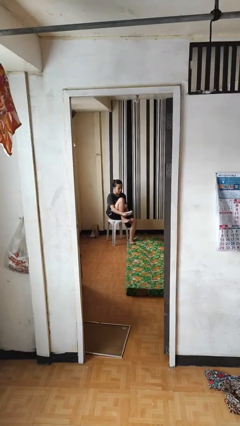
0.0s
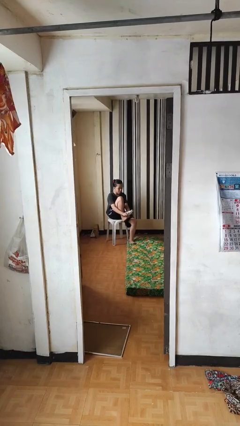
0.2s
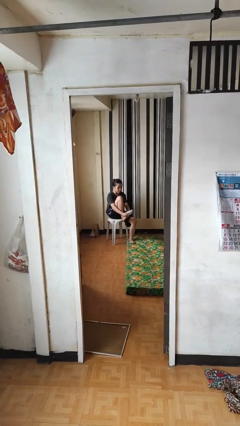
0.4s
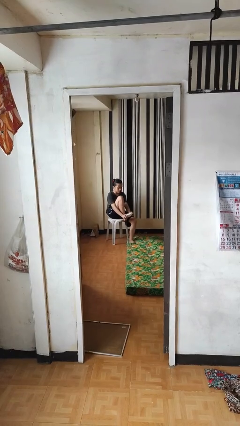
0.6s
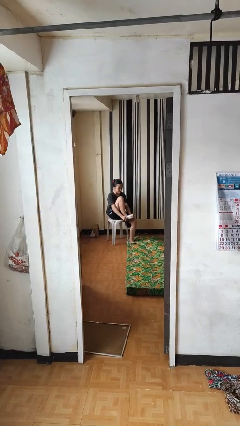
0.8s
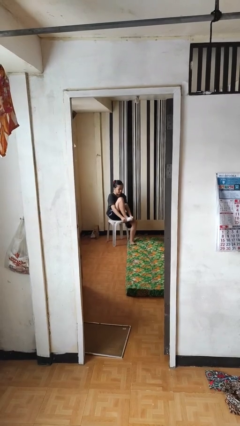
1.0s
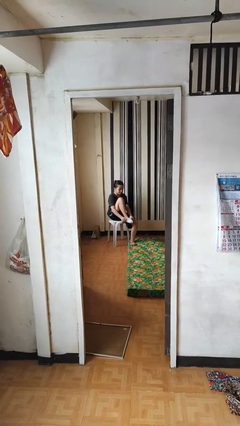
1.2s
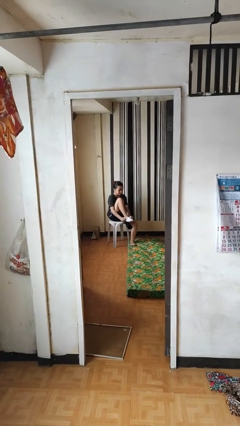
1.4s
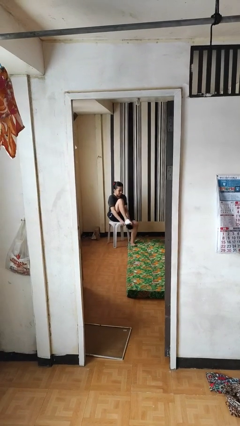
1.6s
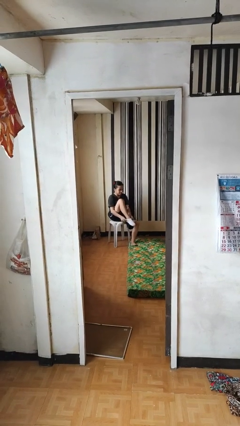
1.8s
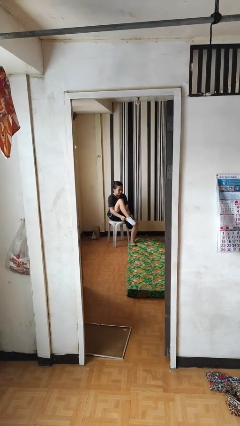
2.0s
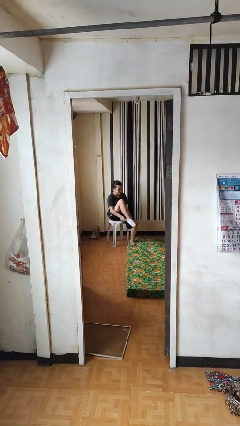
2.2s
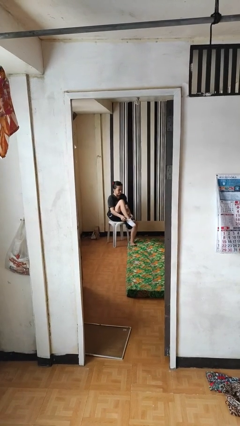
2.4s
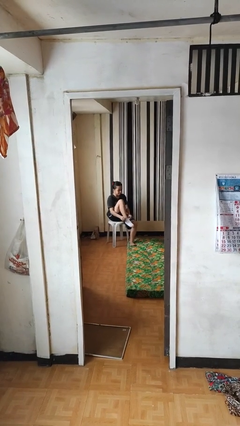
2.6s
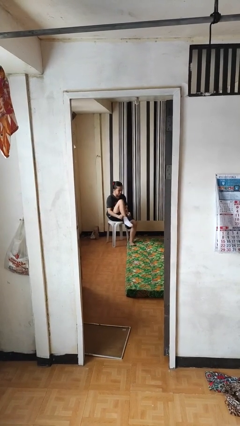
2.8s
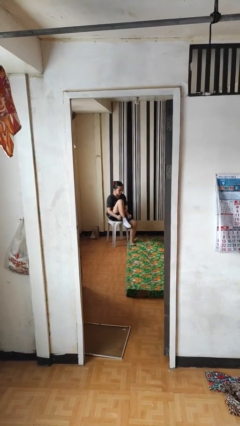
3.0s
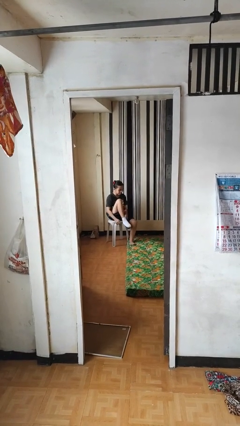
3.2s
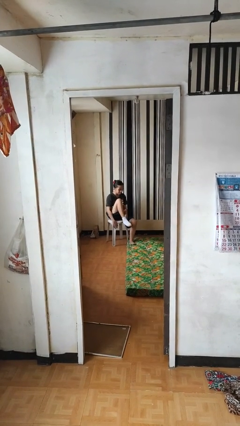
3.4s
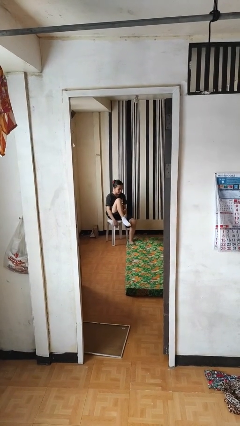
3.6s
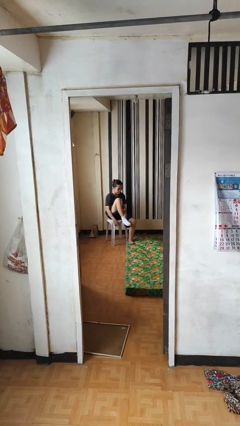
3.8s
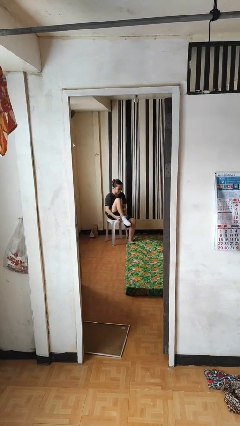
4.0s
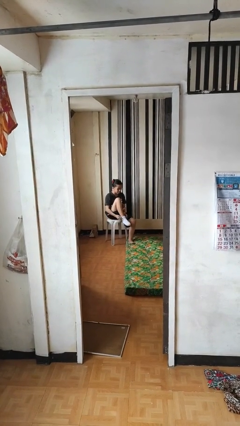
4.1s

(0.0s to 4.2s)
person puts on socks

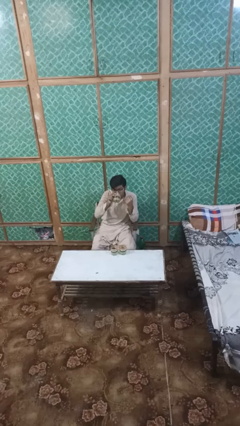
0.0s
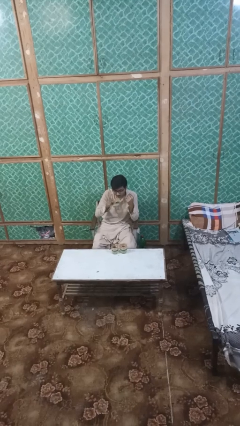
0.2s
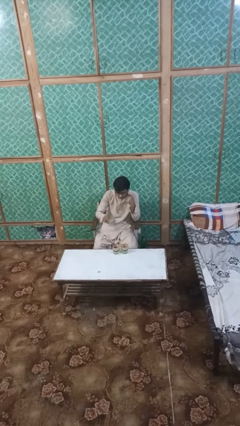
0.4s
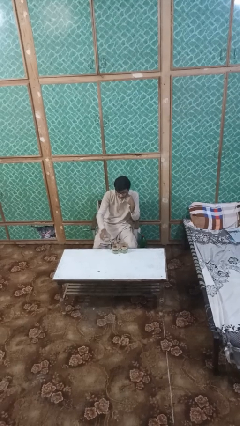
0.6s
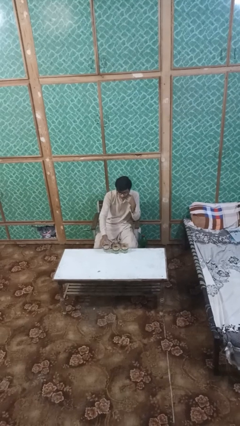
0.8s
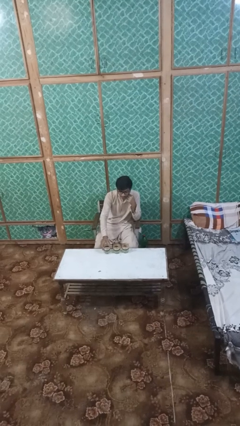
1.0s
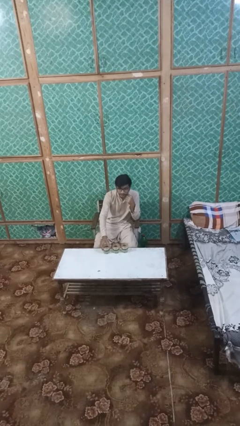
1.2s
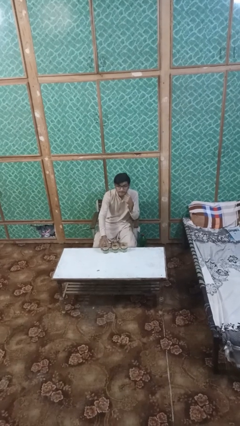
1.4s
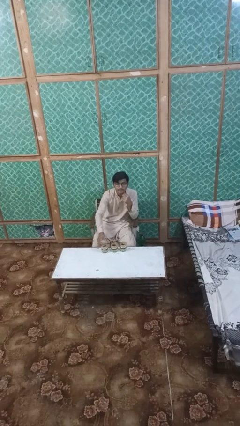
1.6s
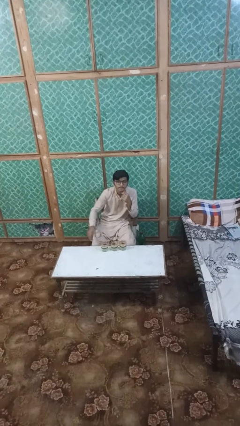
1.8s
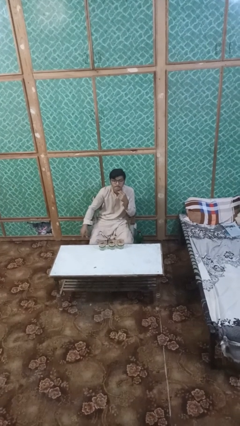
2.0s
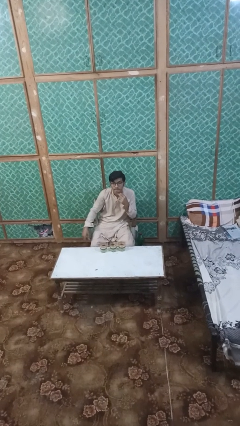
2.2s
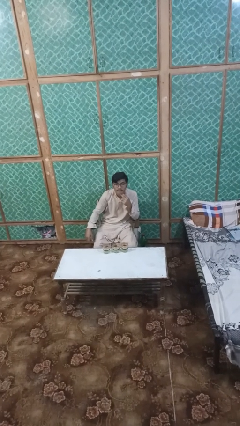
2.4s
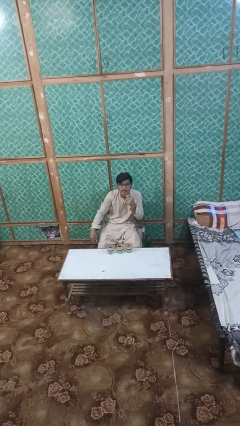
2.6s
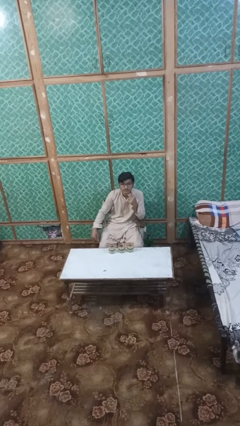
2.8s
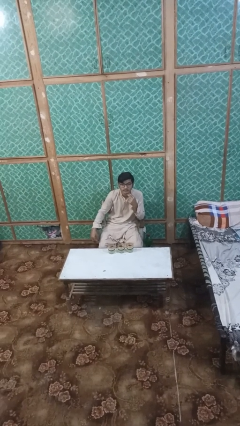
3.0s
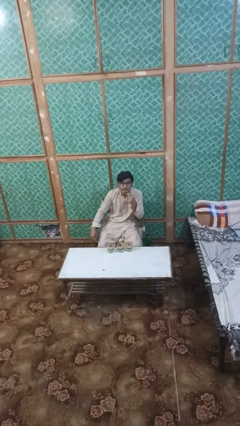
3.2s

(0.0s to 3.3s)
person puts down object on table

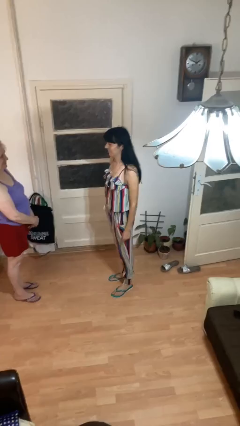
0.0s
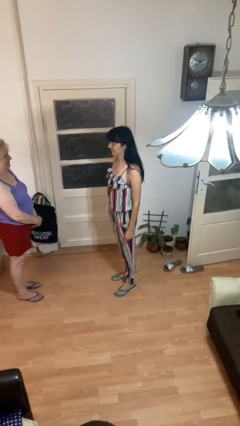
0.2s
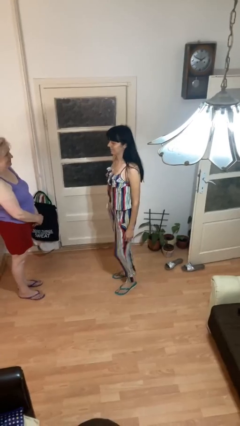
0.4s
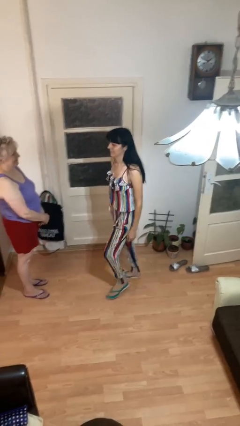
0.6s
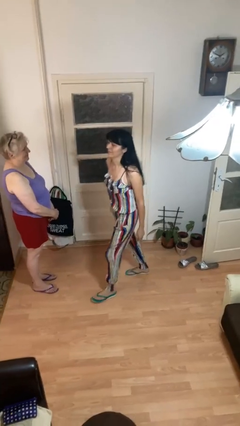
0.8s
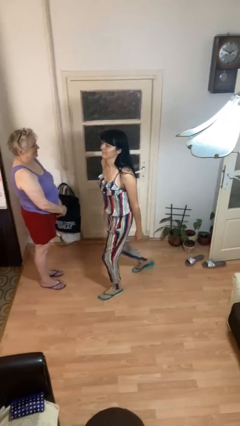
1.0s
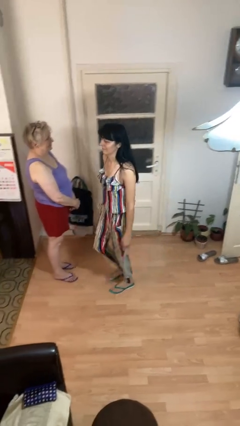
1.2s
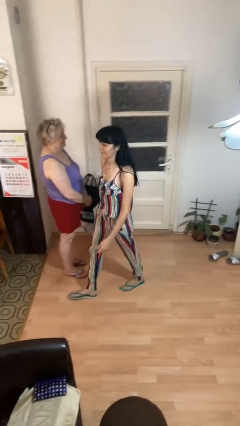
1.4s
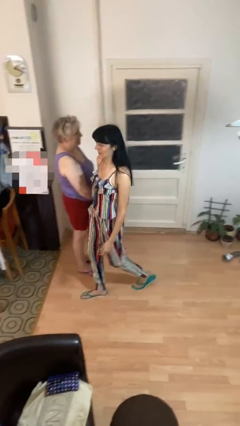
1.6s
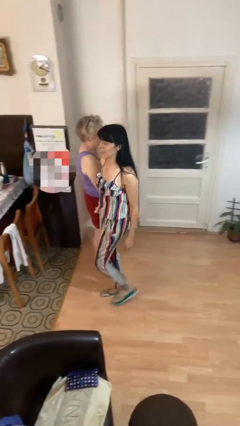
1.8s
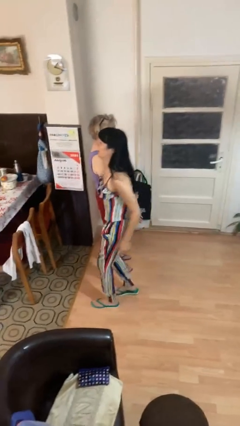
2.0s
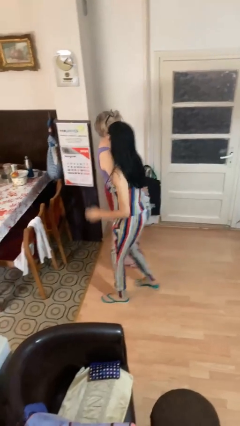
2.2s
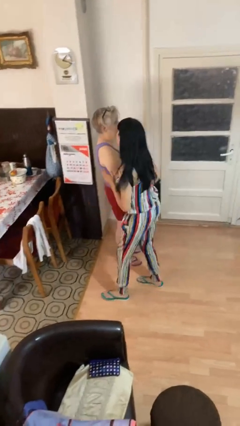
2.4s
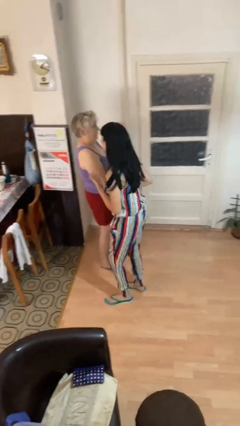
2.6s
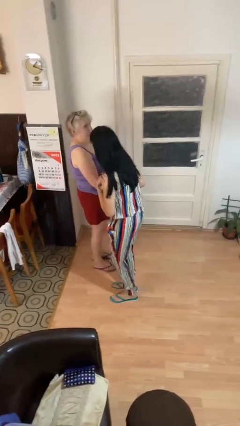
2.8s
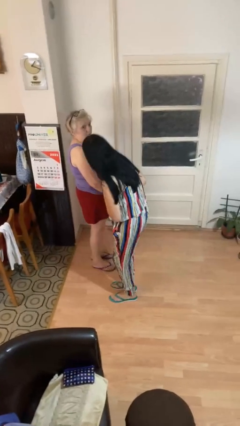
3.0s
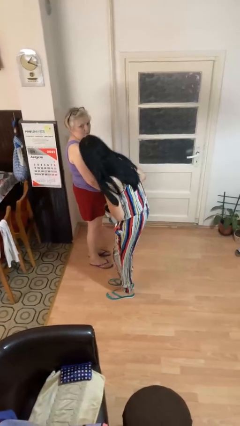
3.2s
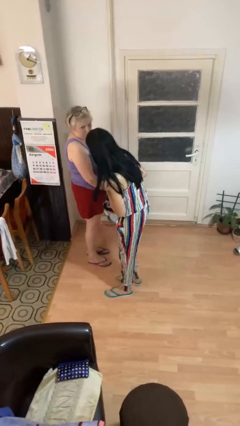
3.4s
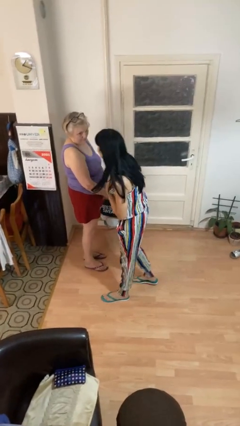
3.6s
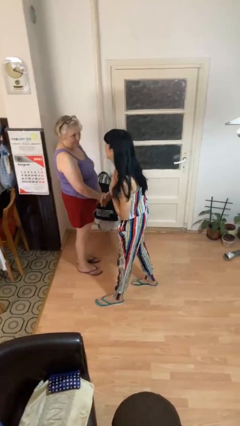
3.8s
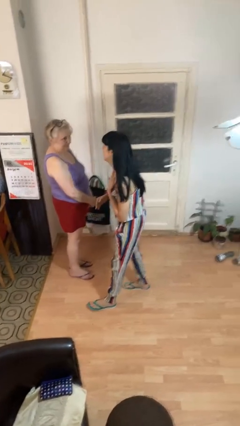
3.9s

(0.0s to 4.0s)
person bumps into person

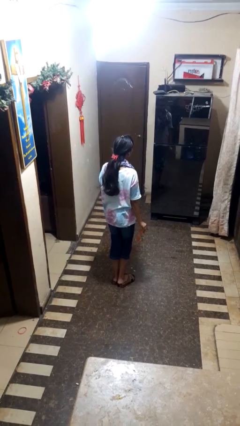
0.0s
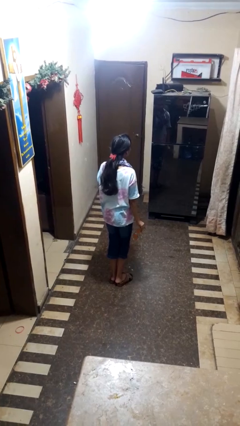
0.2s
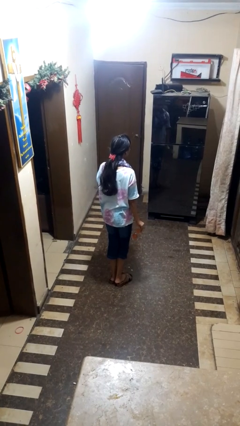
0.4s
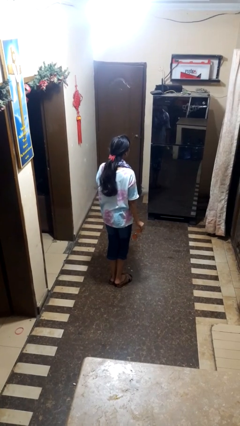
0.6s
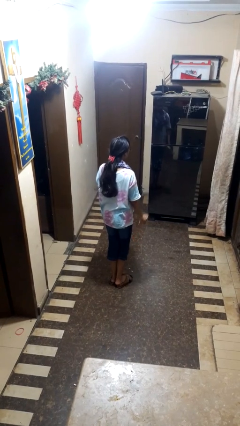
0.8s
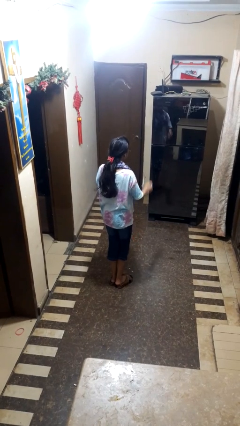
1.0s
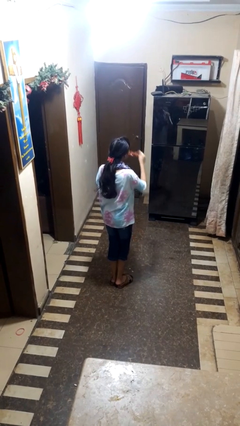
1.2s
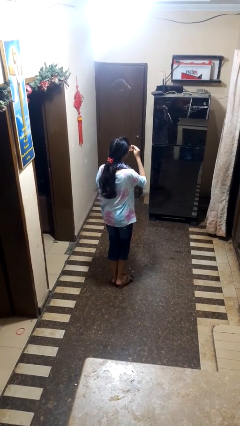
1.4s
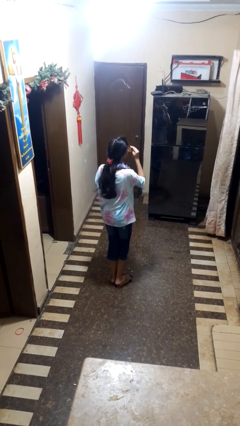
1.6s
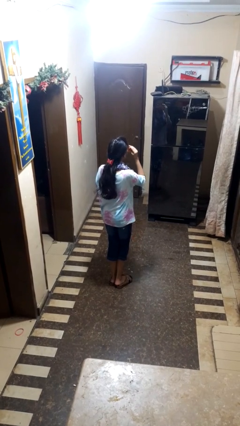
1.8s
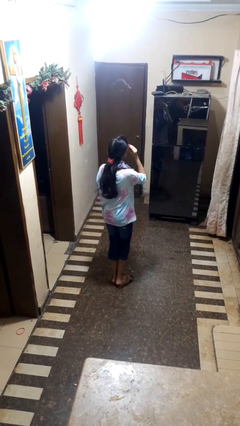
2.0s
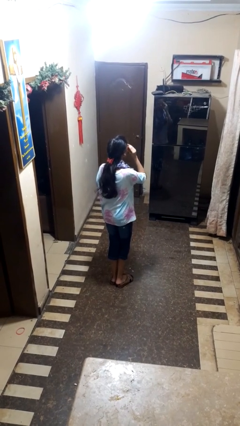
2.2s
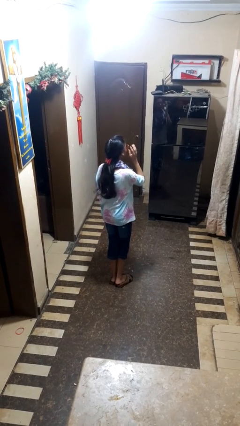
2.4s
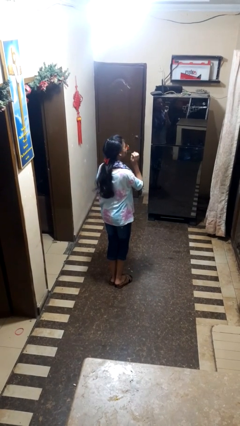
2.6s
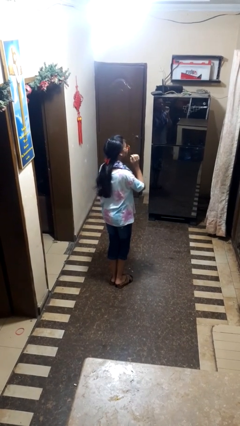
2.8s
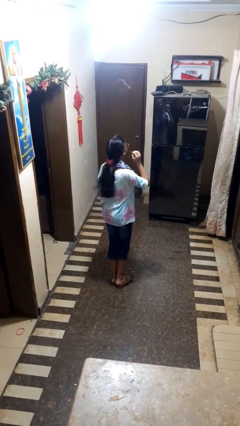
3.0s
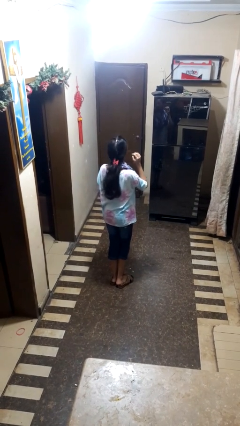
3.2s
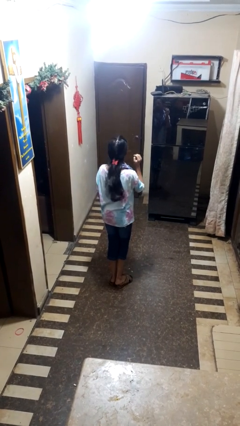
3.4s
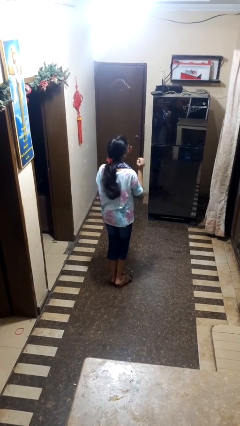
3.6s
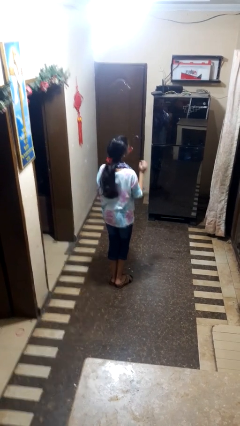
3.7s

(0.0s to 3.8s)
person puts on sunglasses

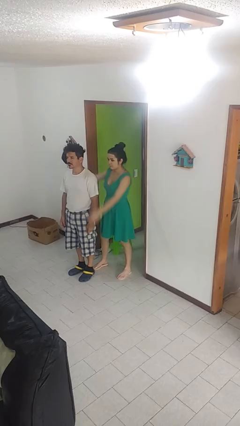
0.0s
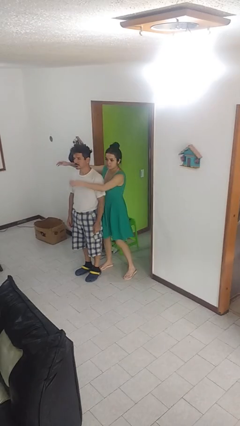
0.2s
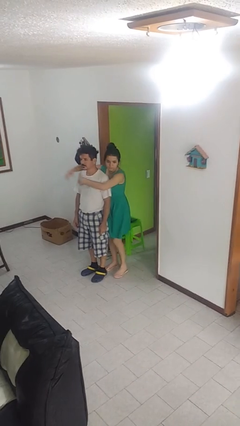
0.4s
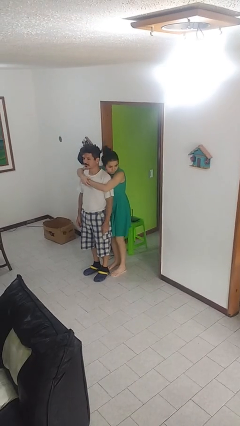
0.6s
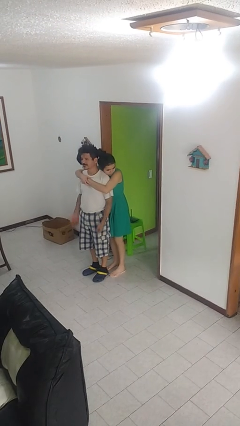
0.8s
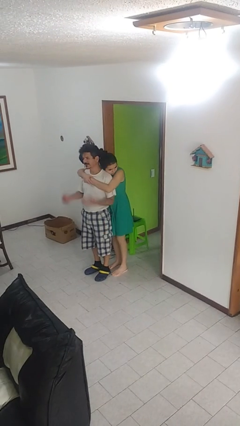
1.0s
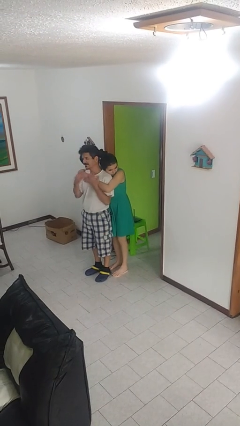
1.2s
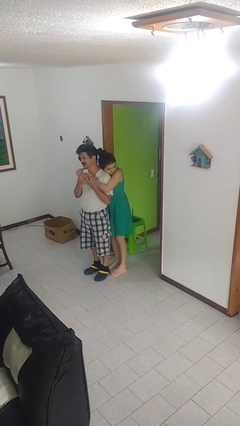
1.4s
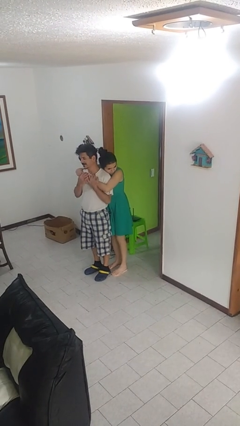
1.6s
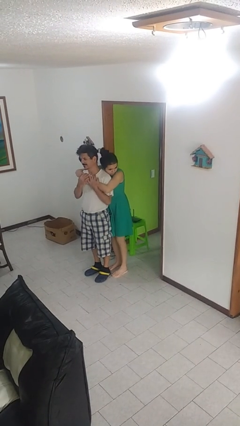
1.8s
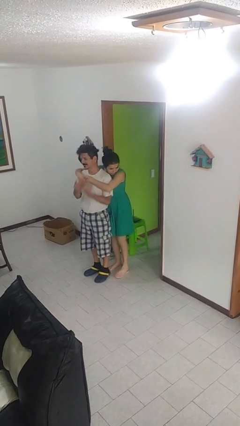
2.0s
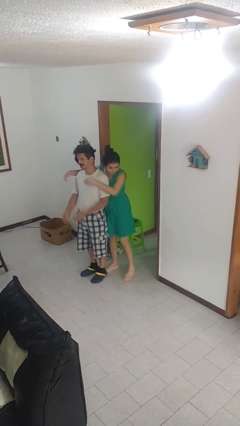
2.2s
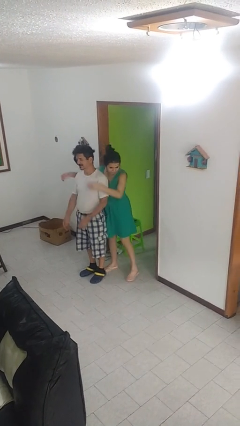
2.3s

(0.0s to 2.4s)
person hugs person from behind

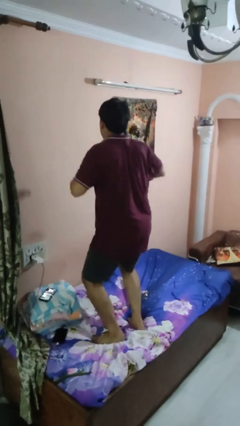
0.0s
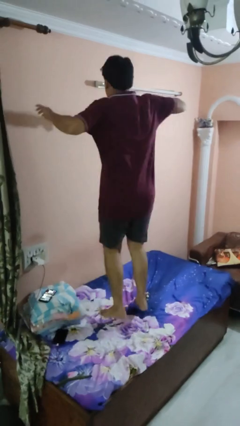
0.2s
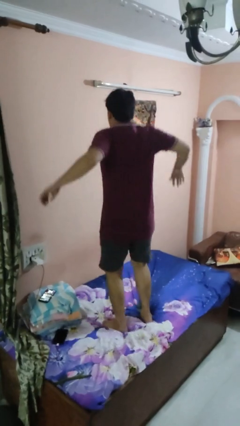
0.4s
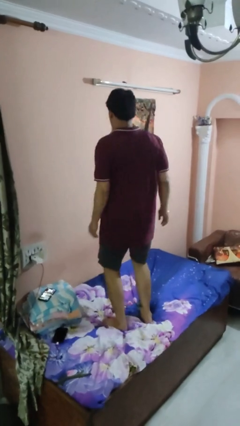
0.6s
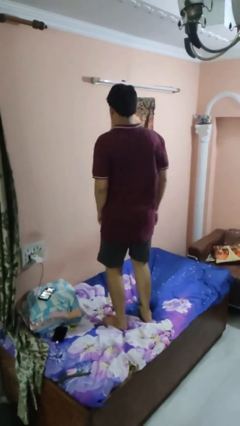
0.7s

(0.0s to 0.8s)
person jumps on bed
